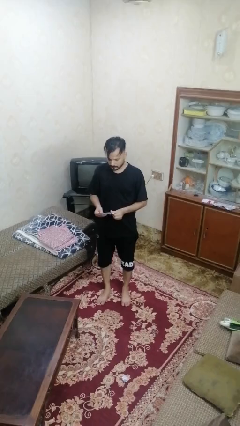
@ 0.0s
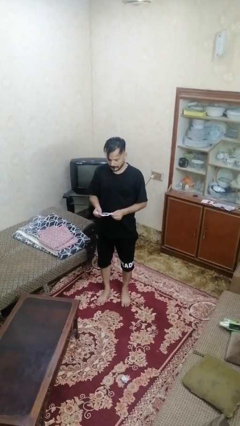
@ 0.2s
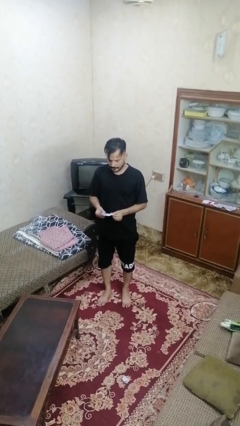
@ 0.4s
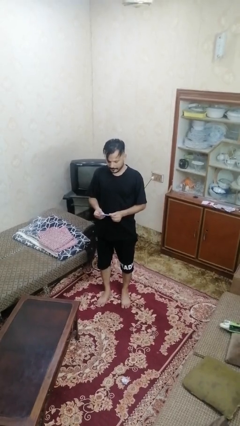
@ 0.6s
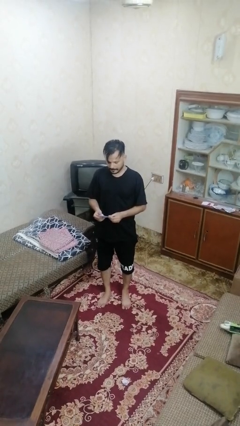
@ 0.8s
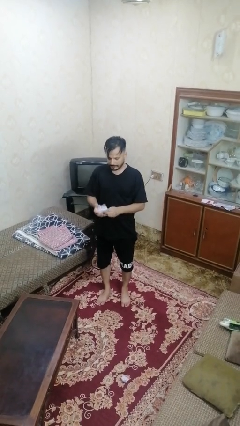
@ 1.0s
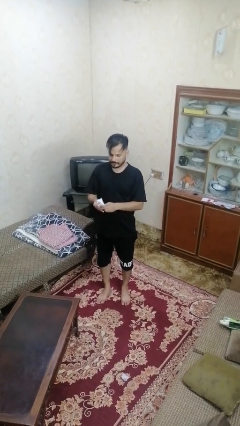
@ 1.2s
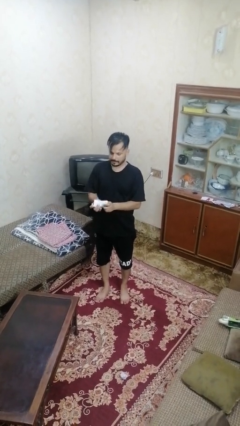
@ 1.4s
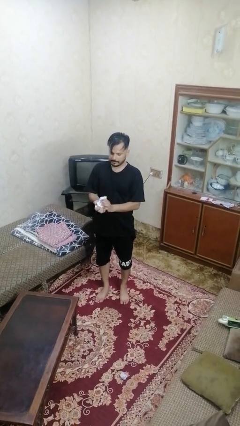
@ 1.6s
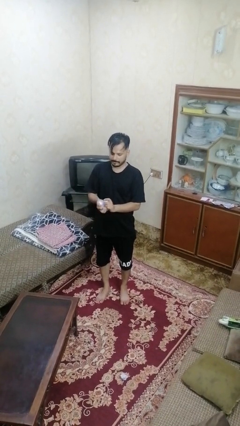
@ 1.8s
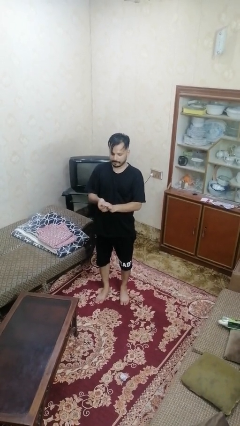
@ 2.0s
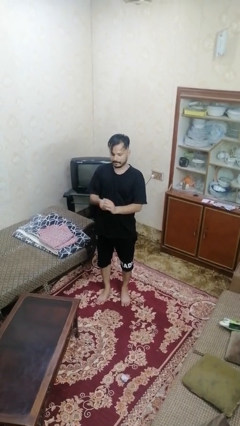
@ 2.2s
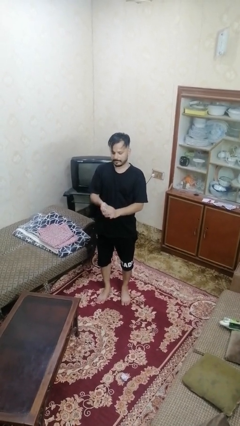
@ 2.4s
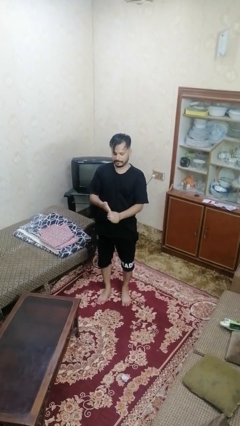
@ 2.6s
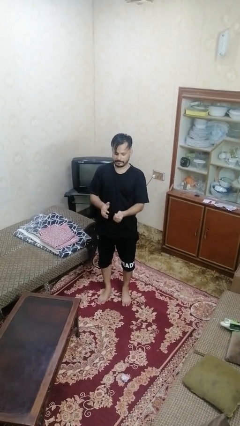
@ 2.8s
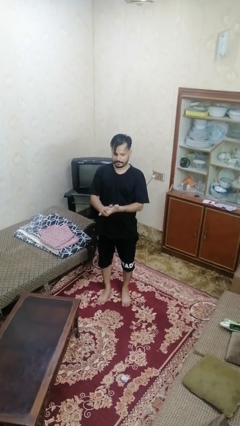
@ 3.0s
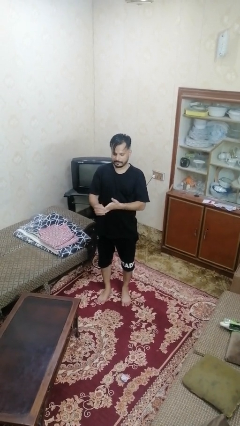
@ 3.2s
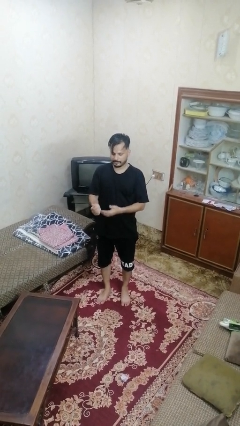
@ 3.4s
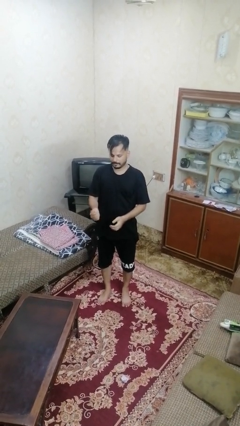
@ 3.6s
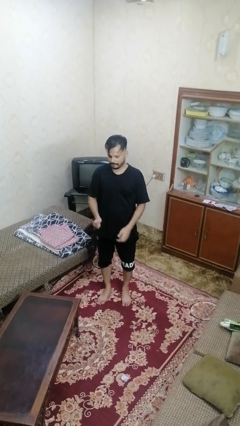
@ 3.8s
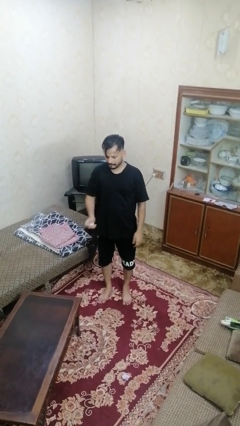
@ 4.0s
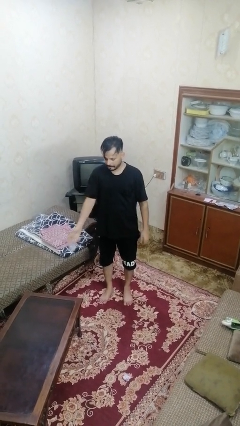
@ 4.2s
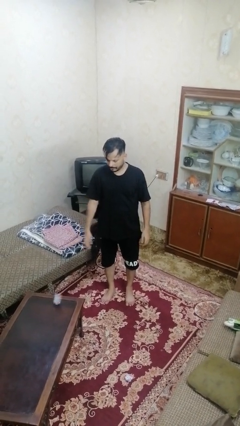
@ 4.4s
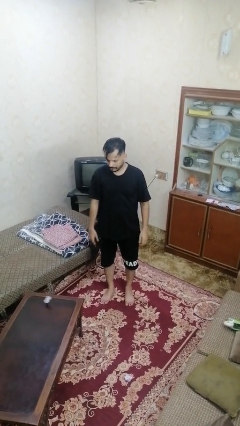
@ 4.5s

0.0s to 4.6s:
person crumples paper

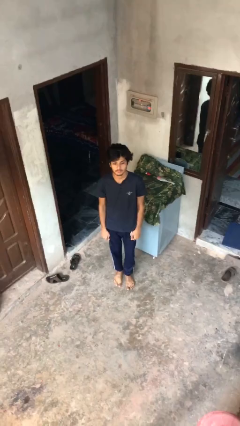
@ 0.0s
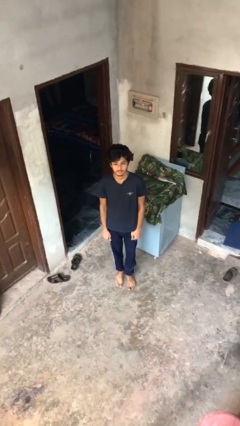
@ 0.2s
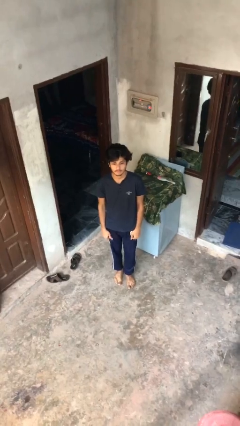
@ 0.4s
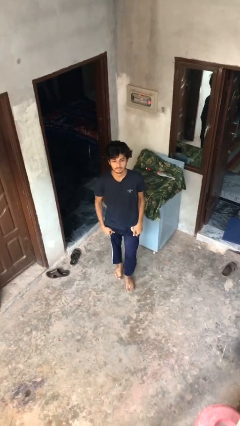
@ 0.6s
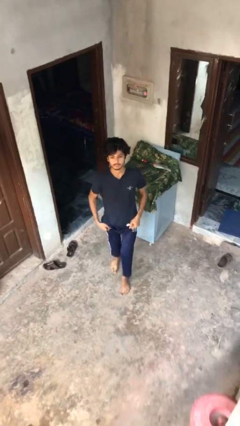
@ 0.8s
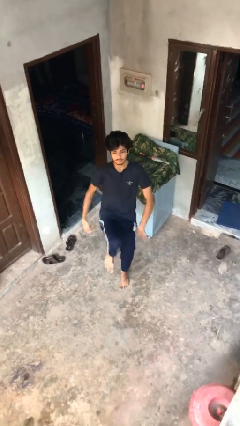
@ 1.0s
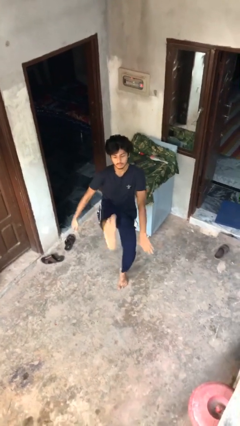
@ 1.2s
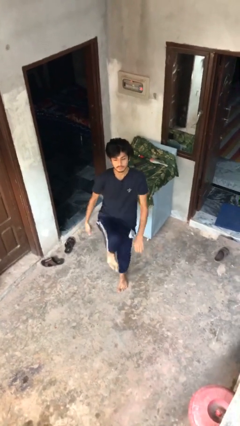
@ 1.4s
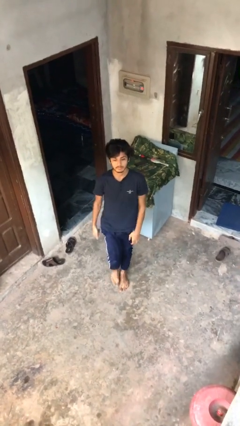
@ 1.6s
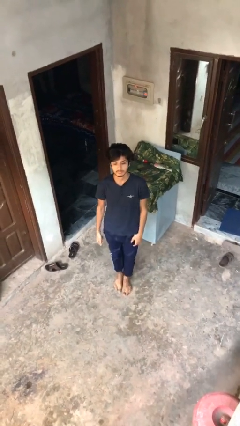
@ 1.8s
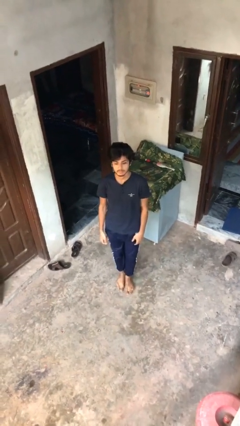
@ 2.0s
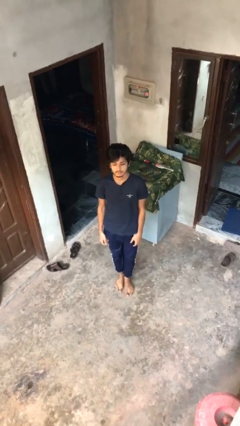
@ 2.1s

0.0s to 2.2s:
person karate kicks

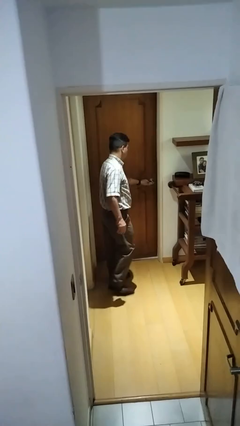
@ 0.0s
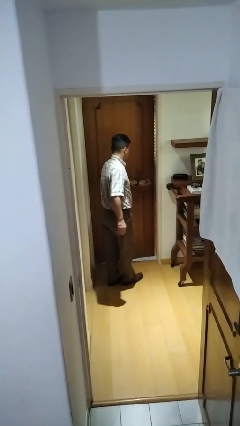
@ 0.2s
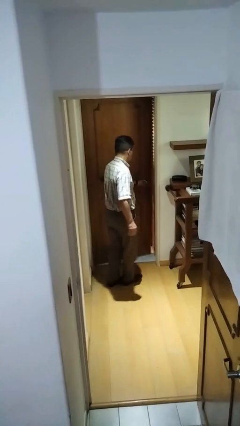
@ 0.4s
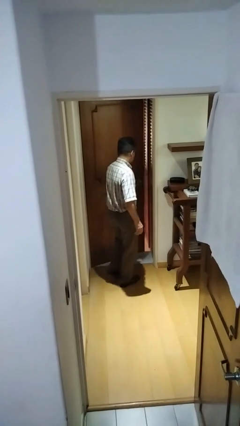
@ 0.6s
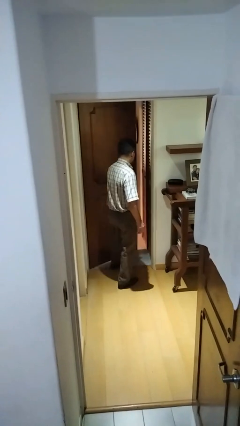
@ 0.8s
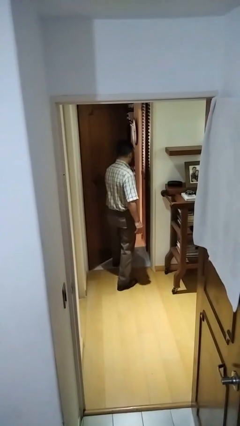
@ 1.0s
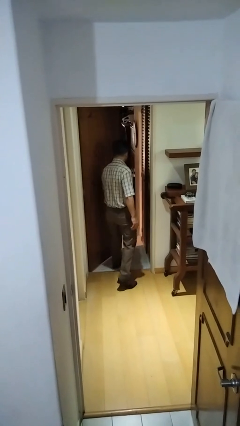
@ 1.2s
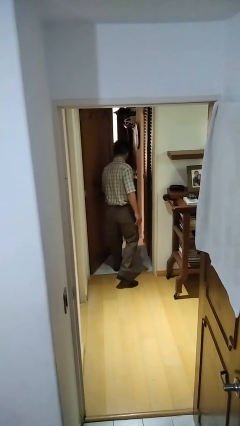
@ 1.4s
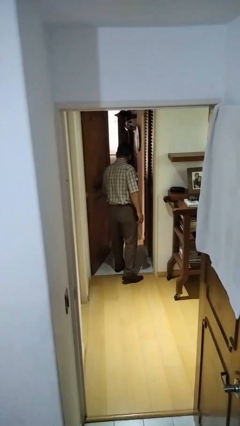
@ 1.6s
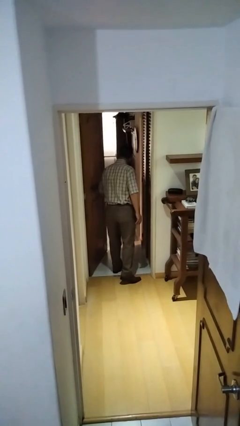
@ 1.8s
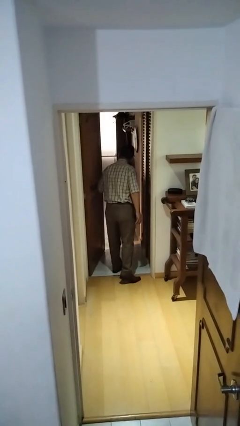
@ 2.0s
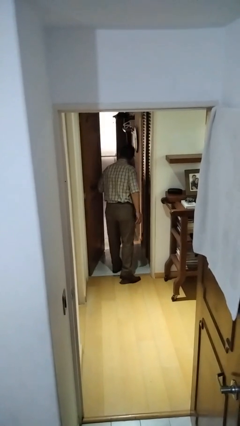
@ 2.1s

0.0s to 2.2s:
person opens facility door

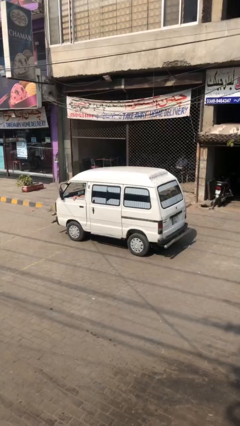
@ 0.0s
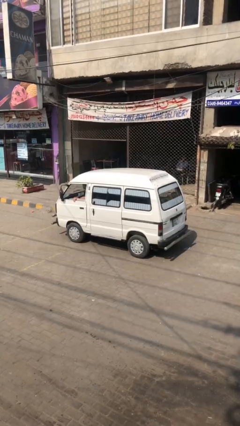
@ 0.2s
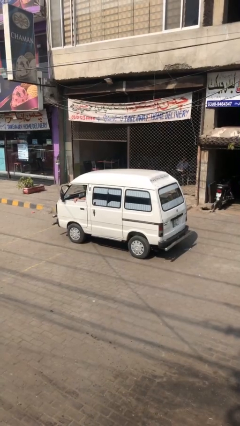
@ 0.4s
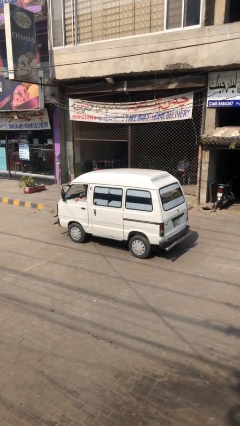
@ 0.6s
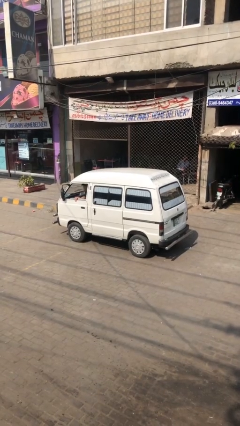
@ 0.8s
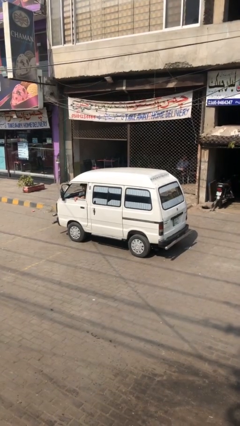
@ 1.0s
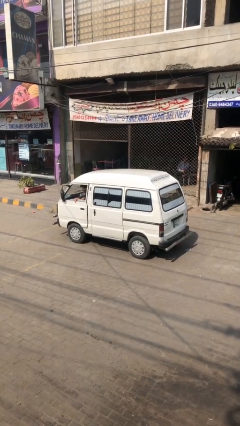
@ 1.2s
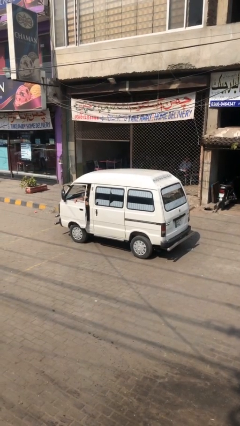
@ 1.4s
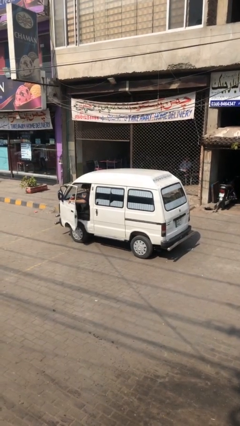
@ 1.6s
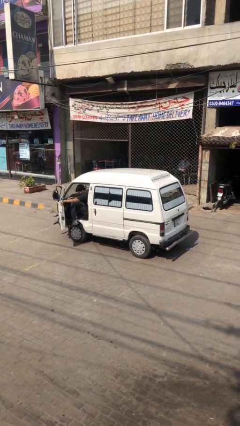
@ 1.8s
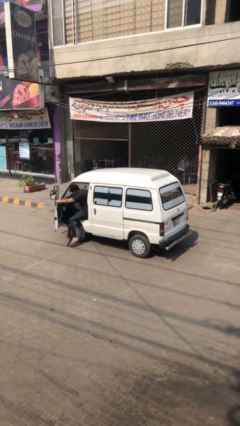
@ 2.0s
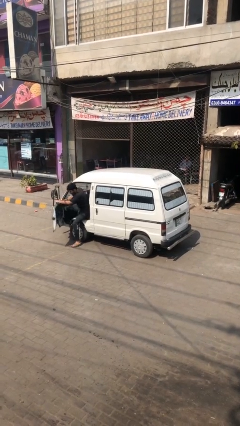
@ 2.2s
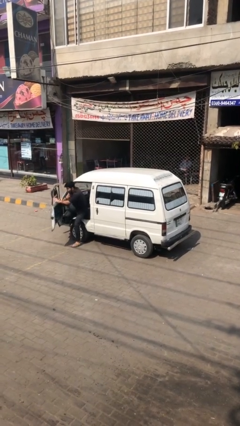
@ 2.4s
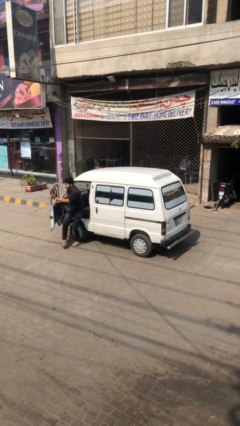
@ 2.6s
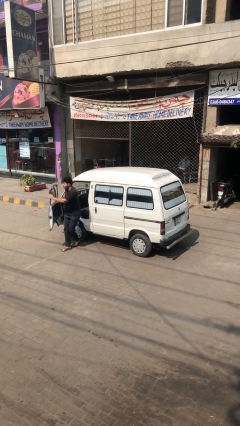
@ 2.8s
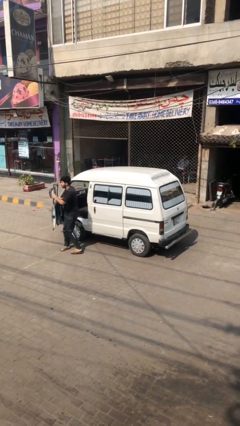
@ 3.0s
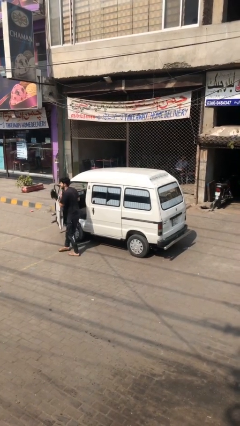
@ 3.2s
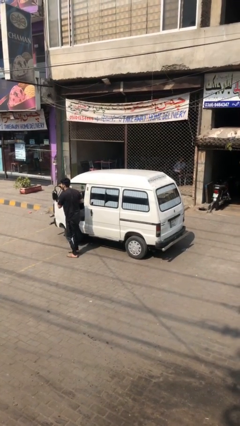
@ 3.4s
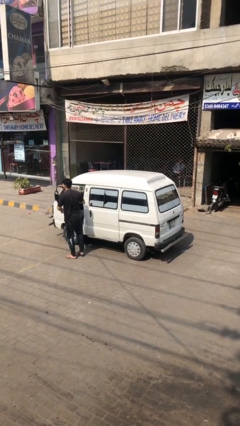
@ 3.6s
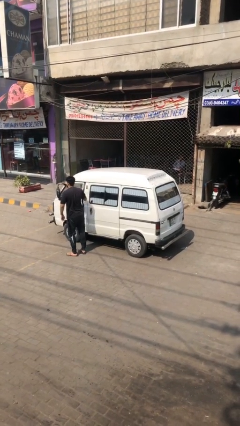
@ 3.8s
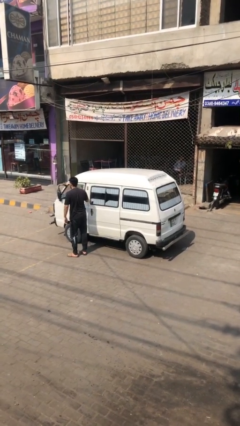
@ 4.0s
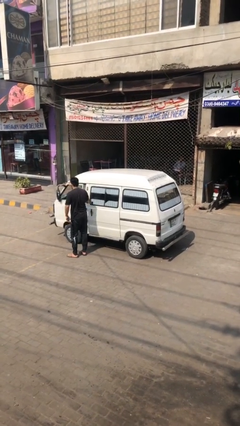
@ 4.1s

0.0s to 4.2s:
car drops off person

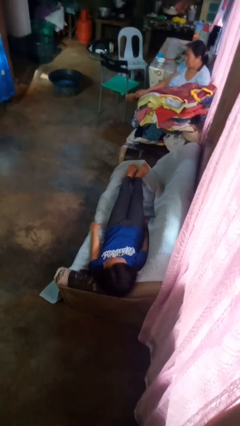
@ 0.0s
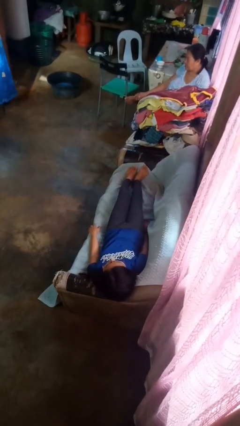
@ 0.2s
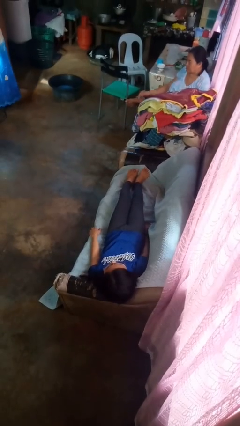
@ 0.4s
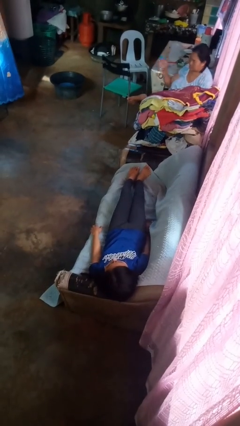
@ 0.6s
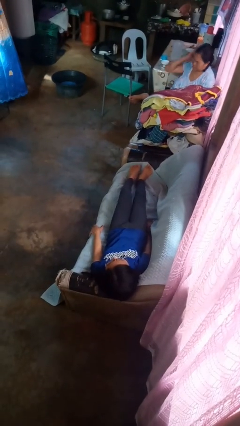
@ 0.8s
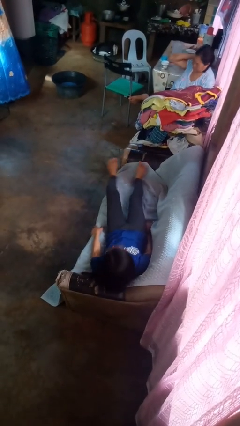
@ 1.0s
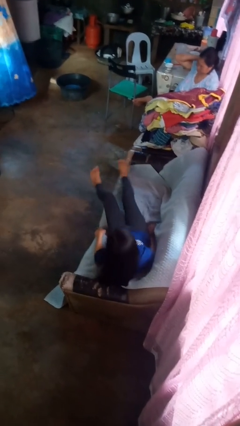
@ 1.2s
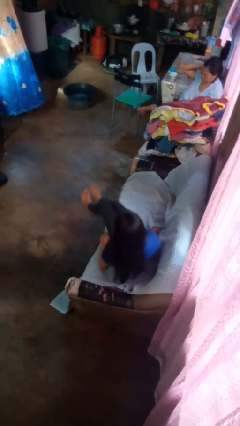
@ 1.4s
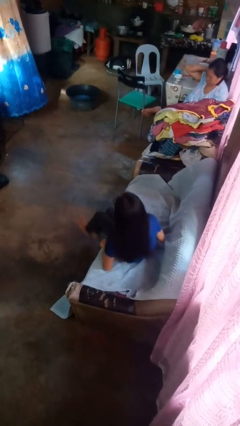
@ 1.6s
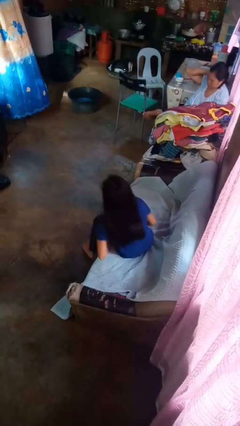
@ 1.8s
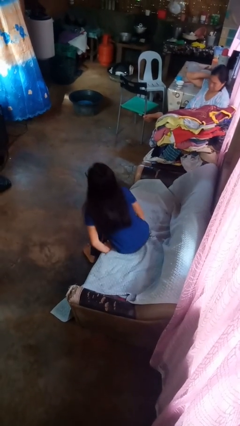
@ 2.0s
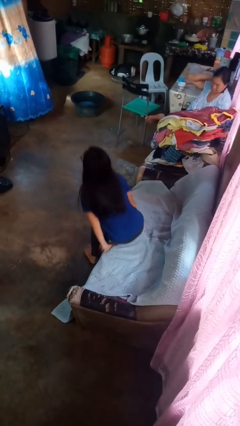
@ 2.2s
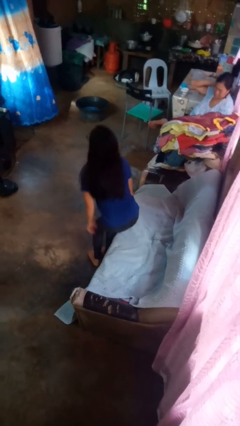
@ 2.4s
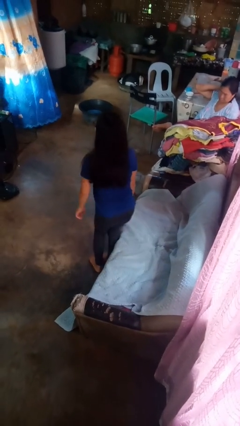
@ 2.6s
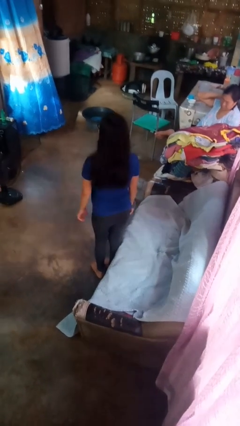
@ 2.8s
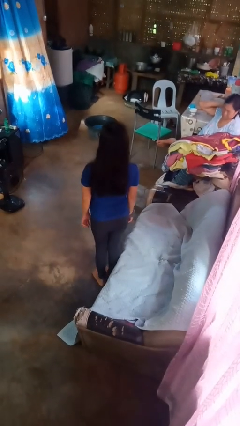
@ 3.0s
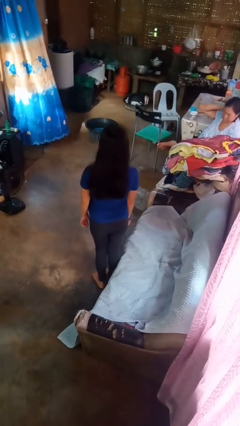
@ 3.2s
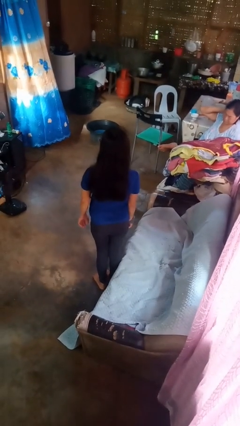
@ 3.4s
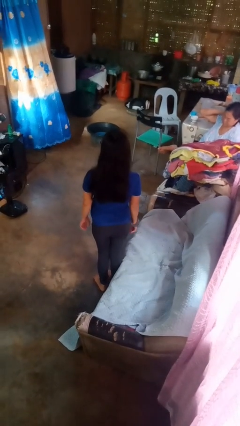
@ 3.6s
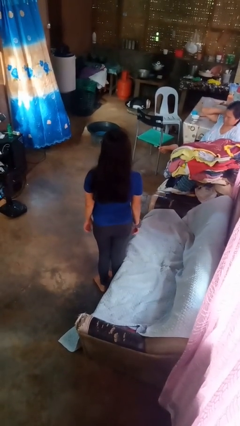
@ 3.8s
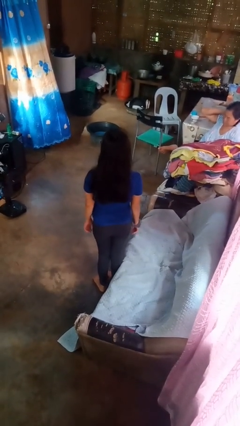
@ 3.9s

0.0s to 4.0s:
person stands up
